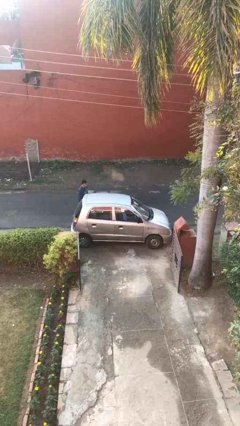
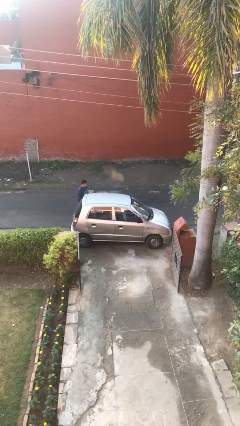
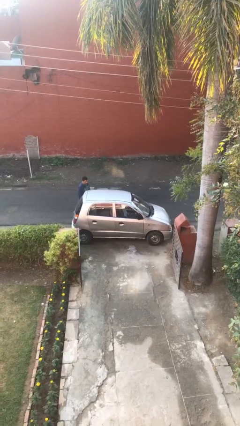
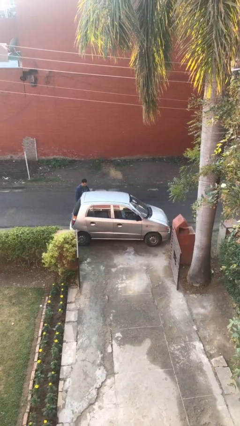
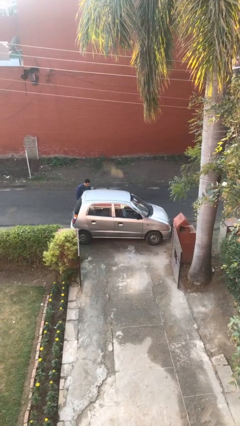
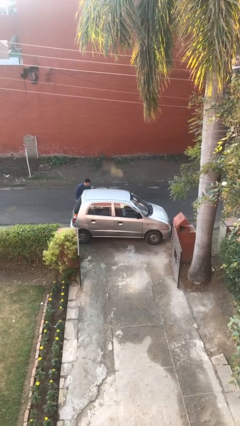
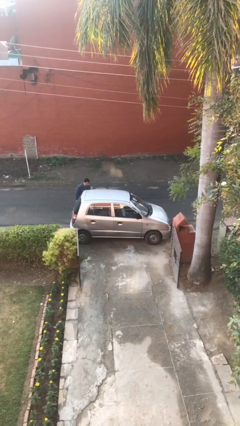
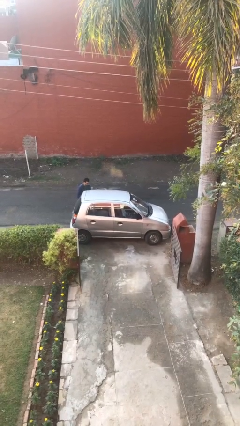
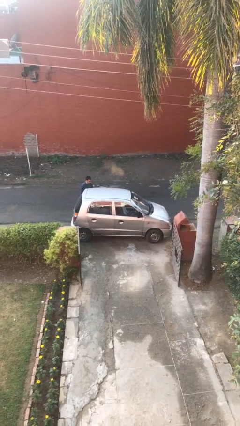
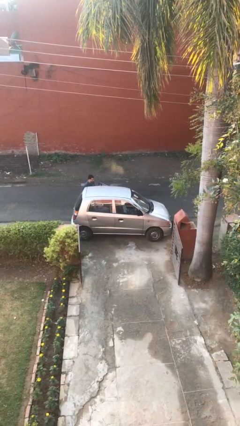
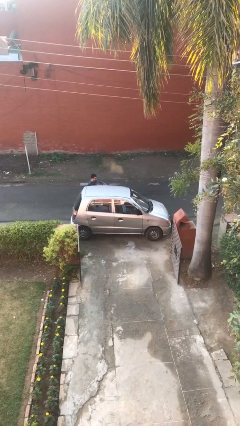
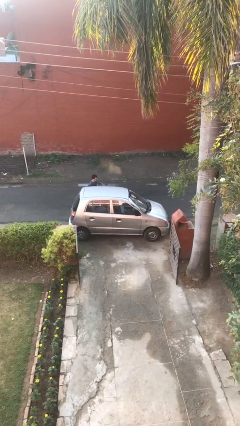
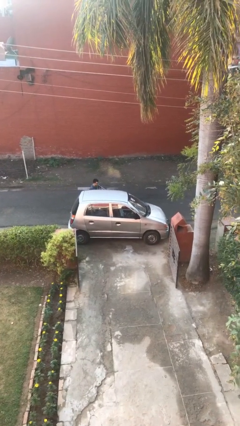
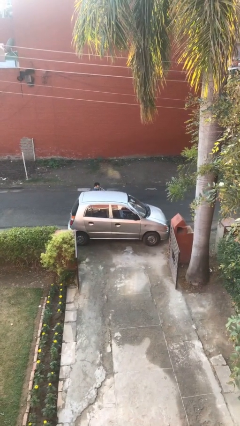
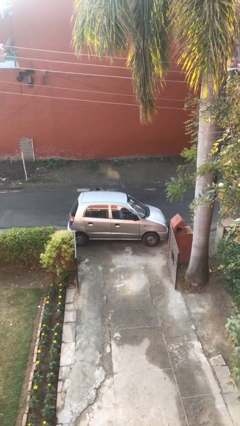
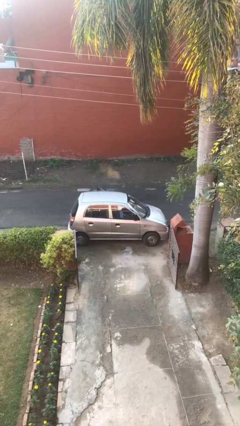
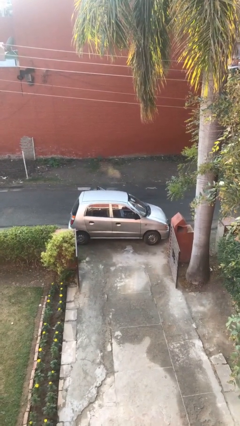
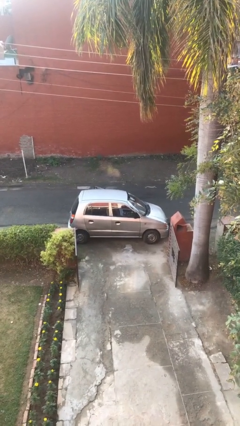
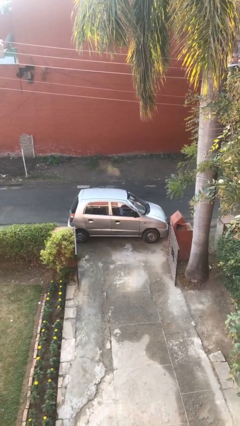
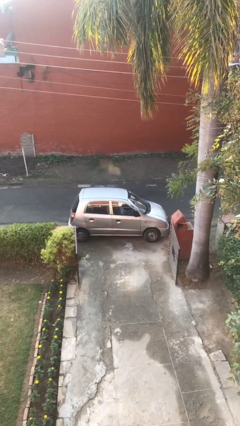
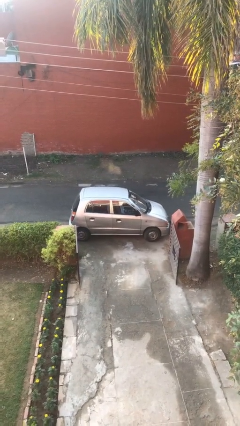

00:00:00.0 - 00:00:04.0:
car picks up person

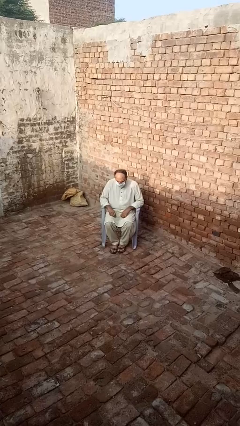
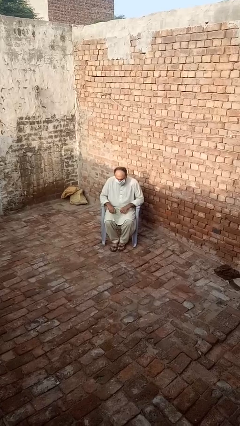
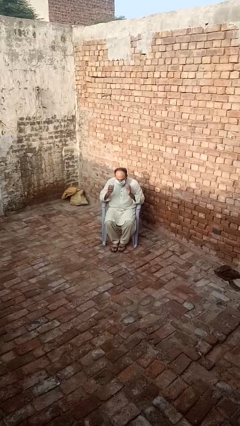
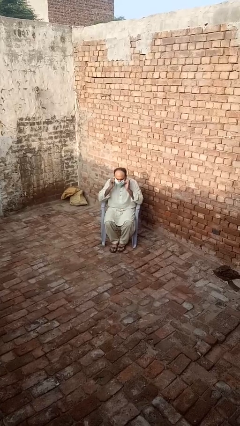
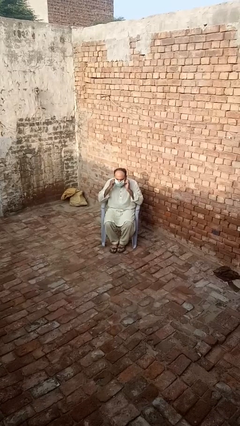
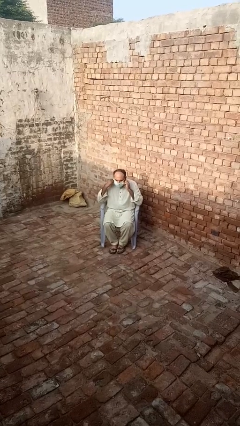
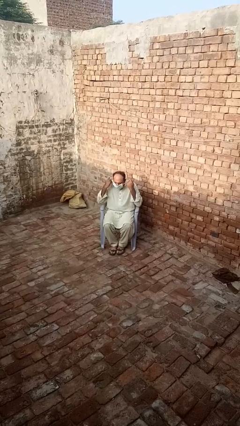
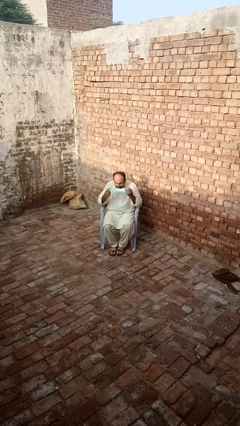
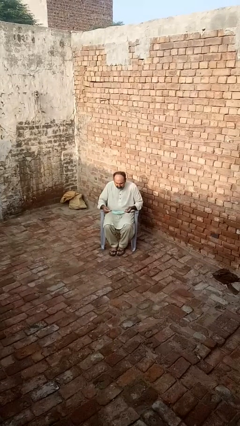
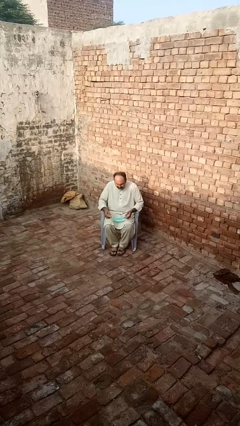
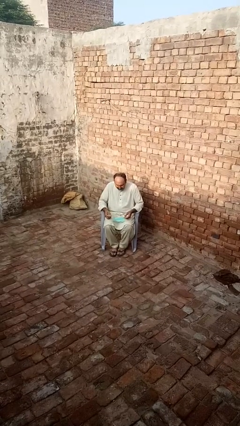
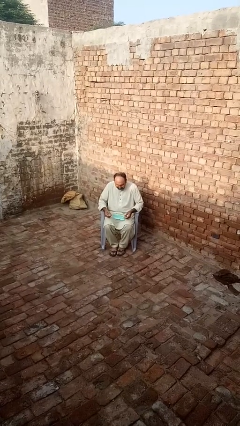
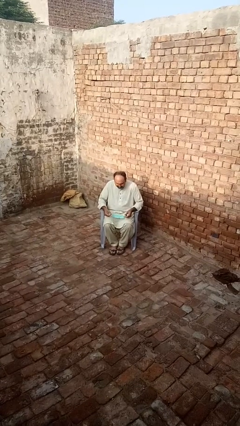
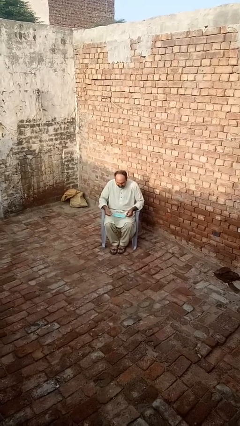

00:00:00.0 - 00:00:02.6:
person takes off facemask

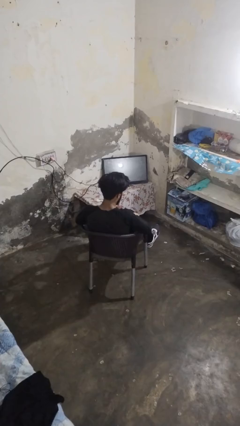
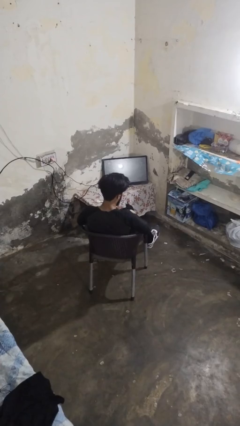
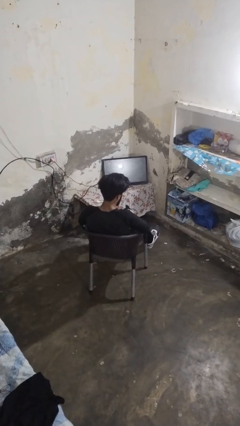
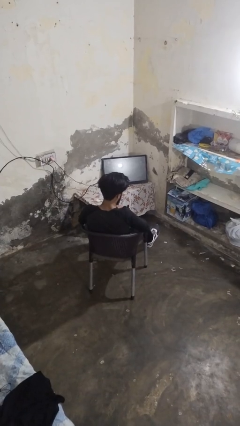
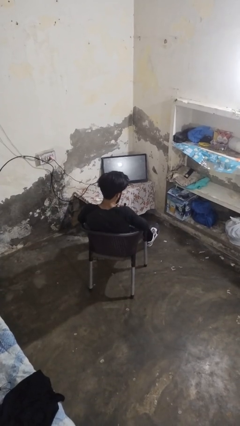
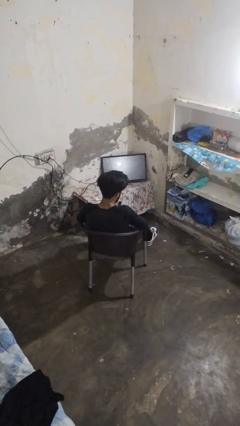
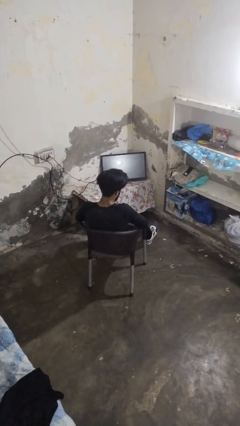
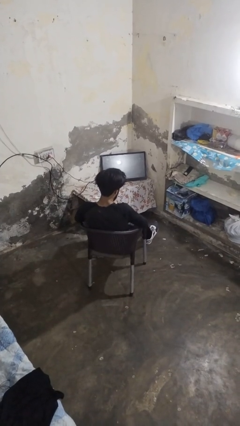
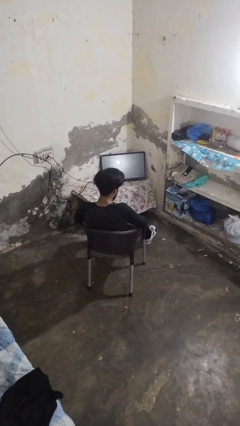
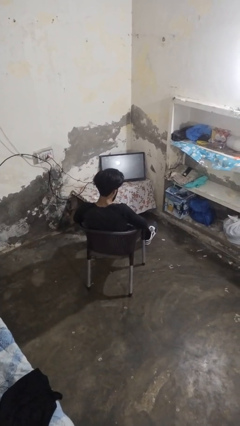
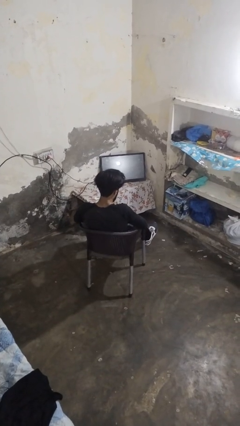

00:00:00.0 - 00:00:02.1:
person takes off gloves

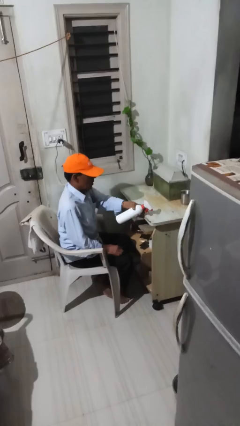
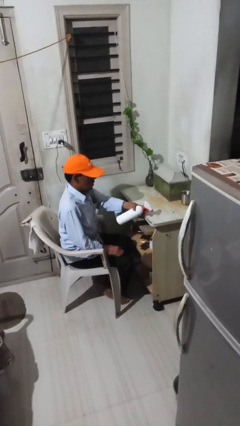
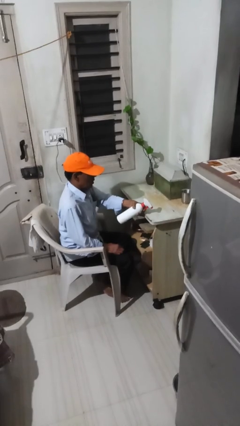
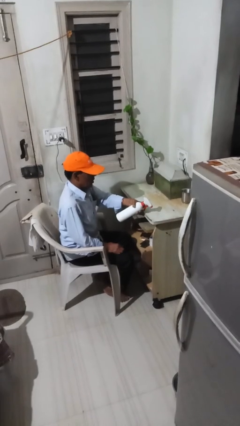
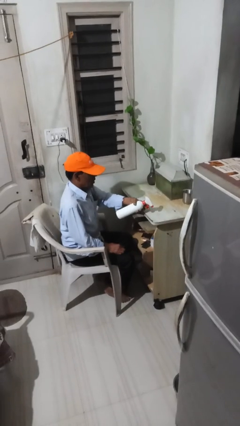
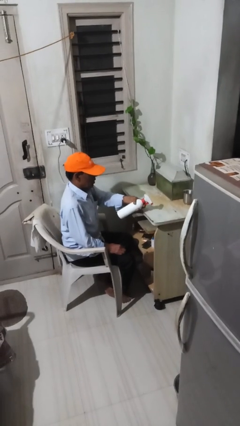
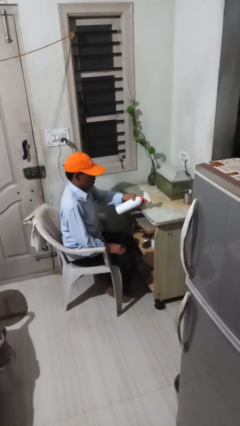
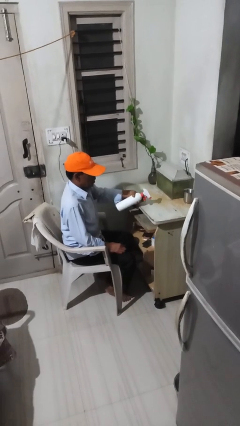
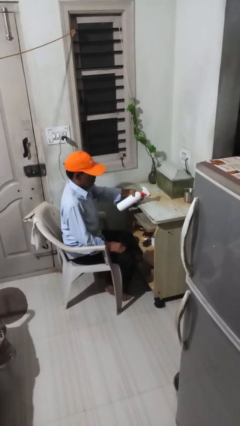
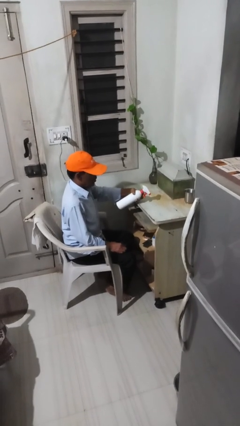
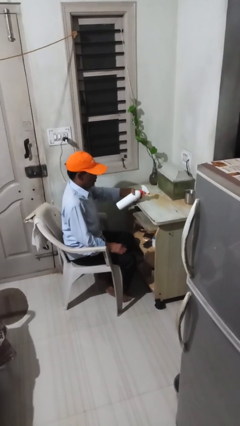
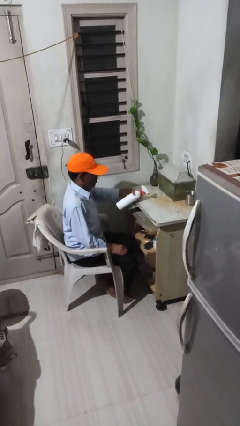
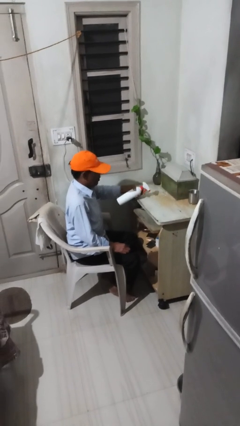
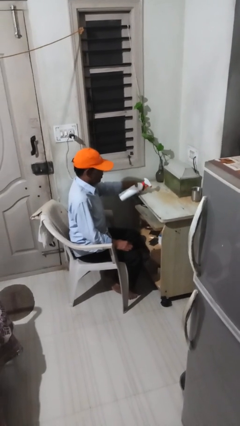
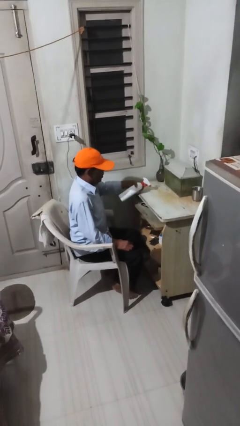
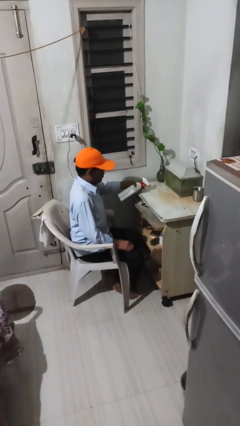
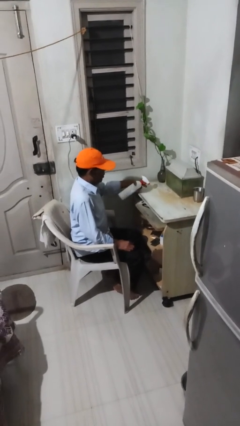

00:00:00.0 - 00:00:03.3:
person sprays from bottle

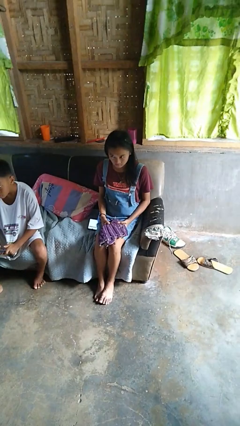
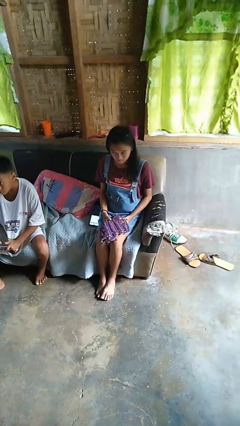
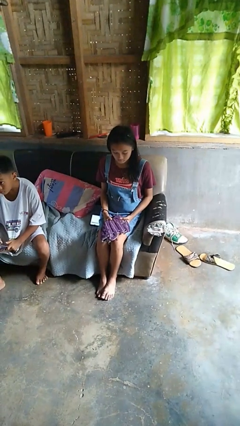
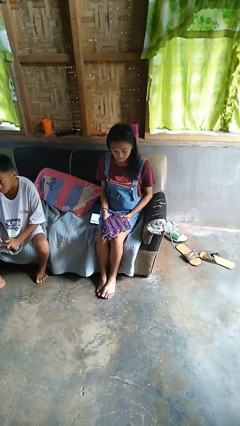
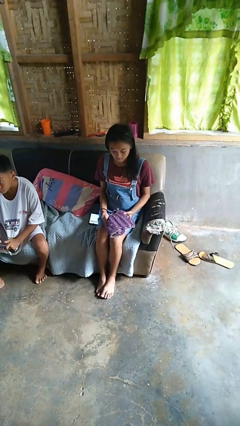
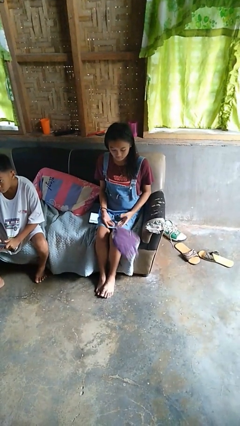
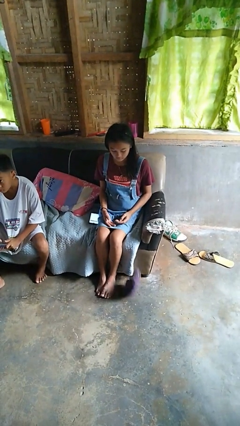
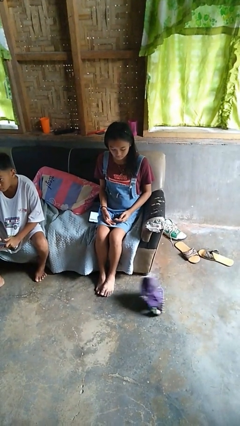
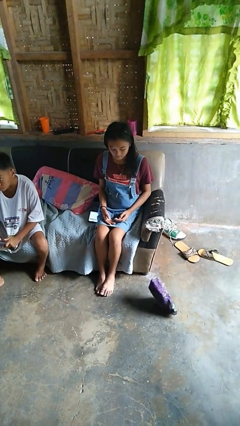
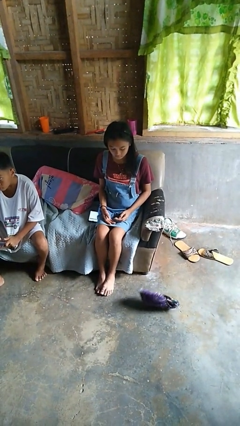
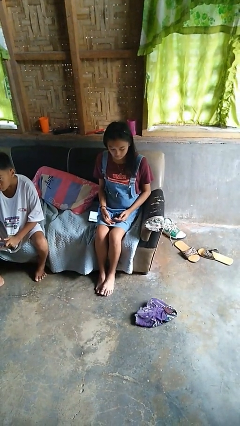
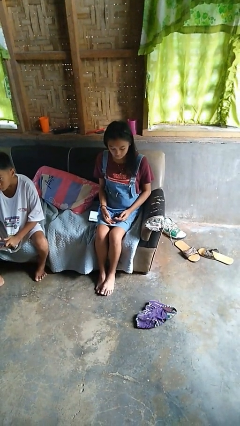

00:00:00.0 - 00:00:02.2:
person drops object

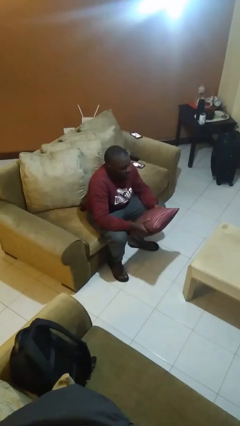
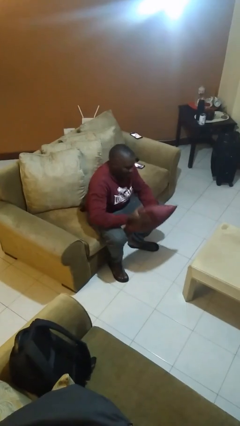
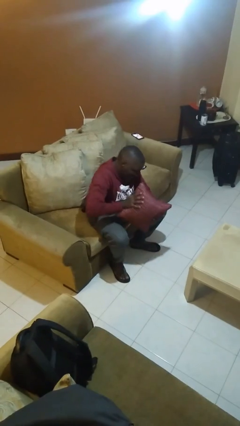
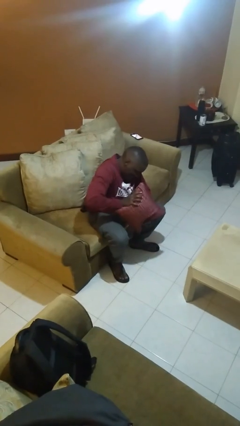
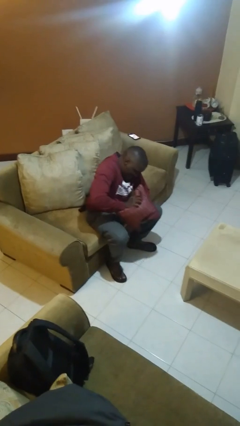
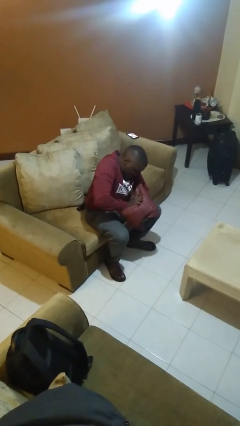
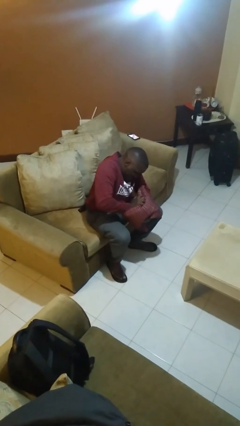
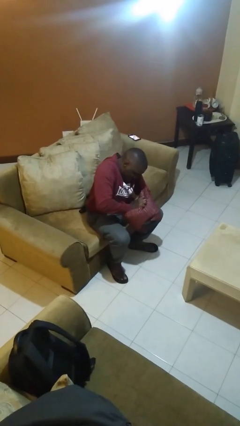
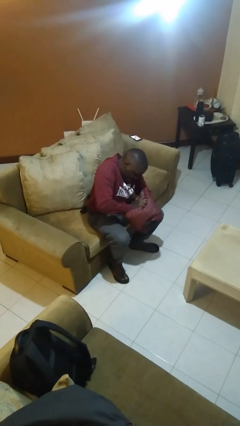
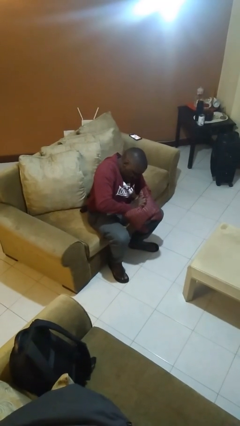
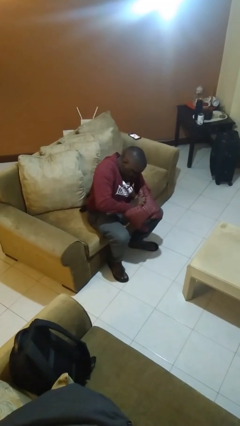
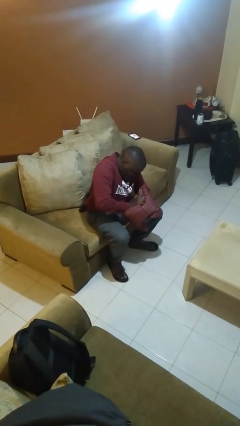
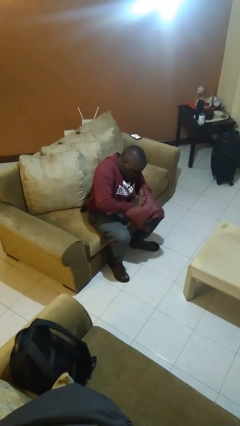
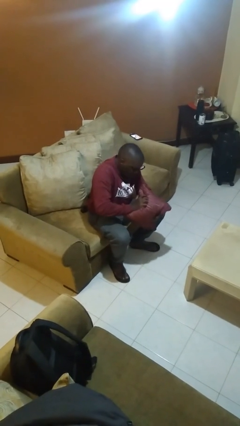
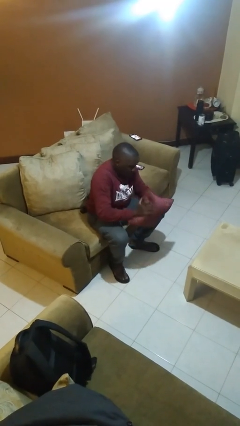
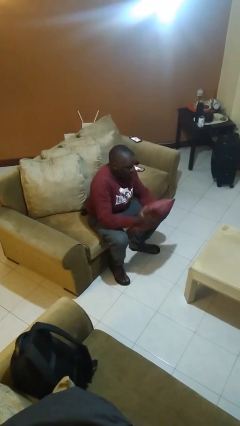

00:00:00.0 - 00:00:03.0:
person squeezes object

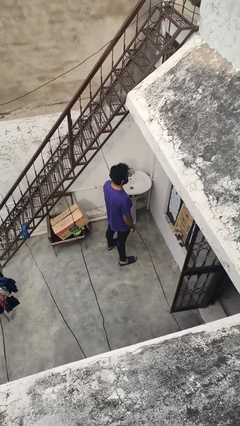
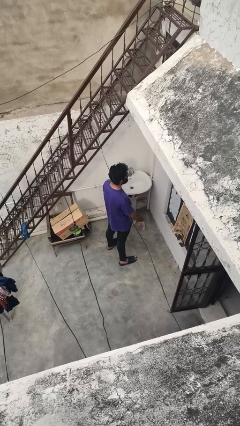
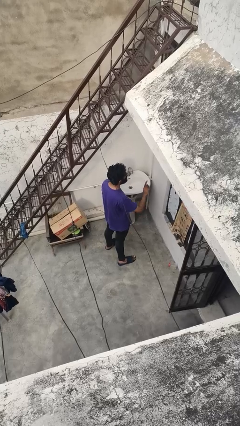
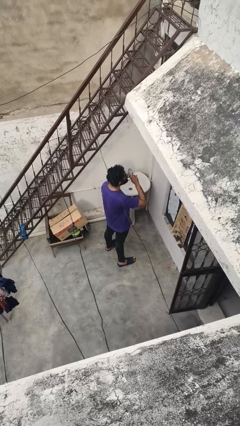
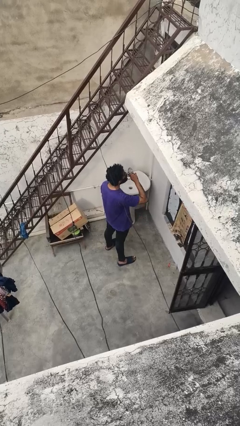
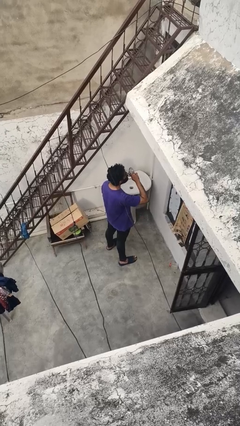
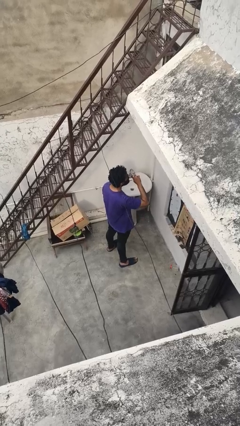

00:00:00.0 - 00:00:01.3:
person gestures be quiet
